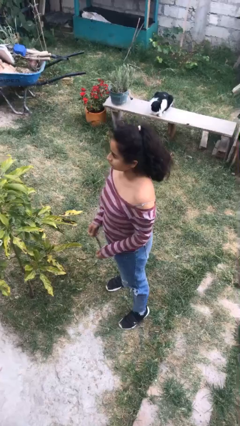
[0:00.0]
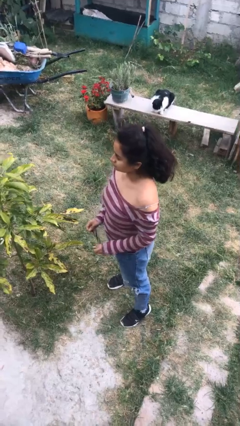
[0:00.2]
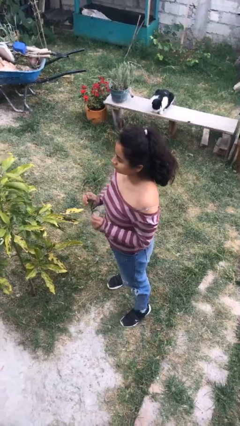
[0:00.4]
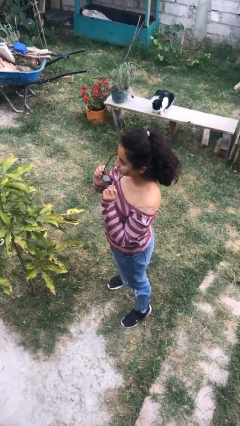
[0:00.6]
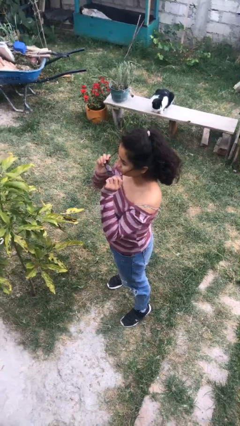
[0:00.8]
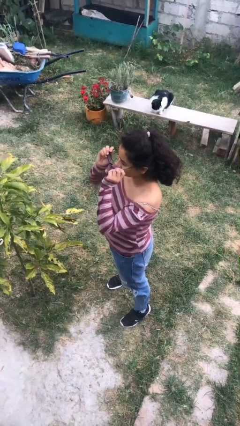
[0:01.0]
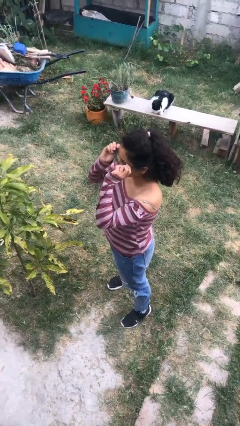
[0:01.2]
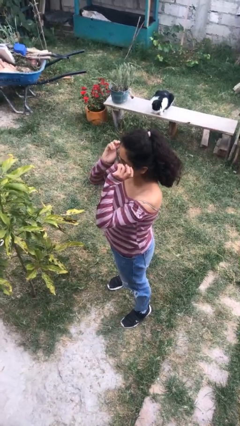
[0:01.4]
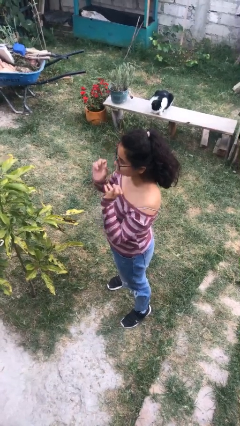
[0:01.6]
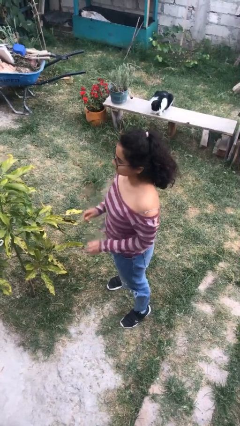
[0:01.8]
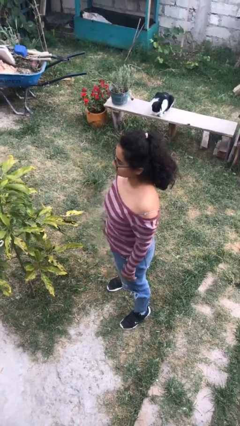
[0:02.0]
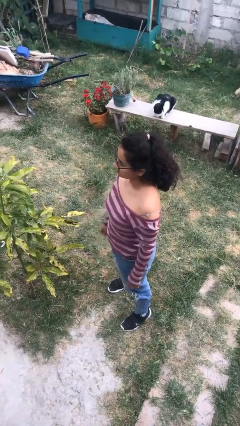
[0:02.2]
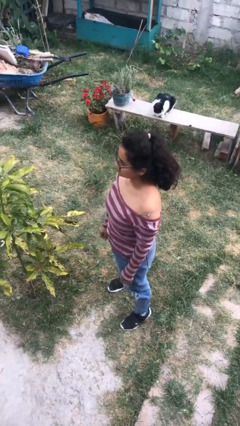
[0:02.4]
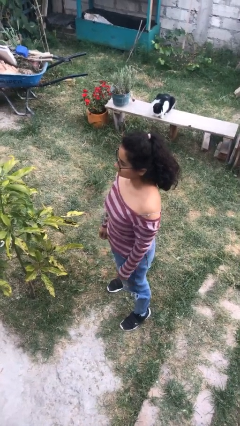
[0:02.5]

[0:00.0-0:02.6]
person puts on glasses

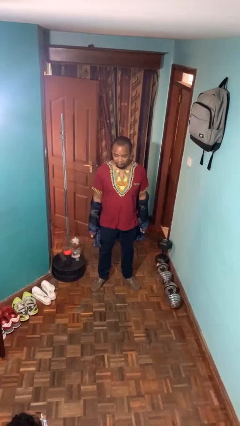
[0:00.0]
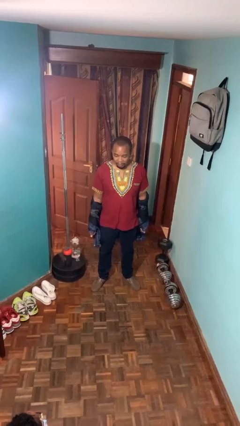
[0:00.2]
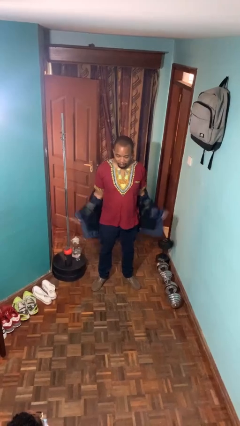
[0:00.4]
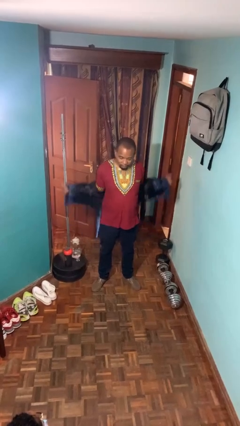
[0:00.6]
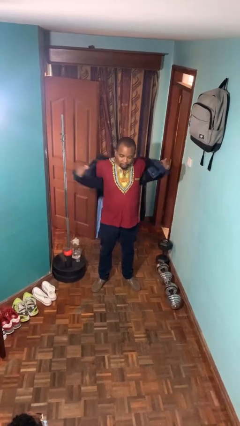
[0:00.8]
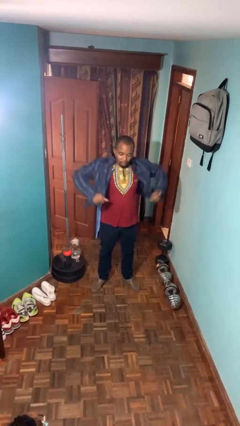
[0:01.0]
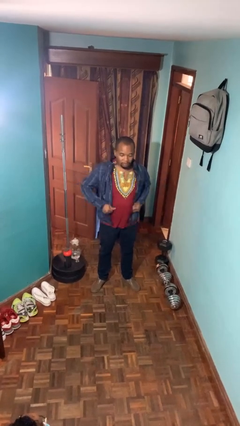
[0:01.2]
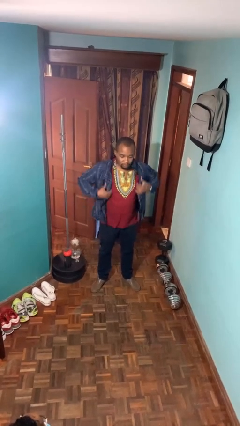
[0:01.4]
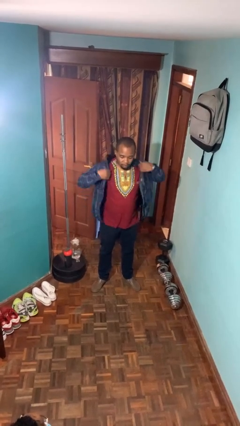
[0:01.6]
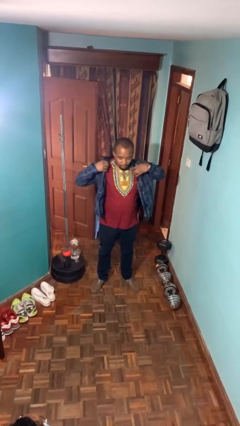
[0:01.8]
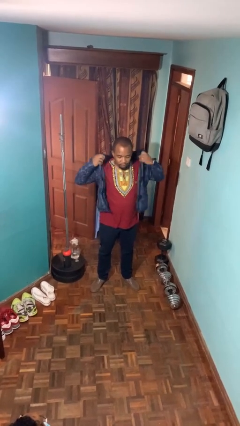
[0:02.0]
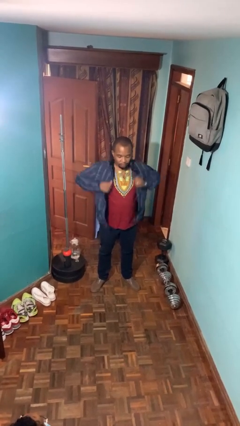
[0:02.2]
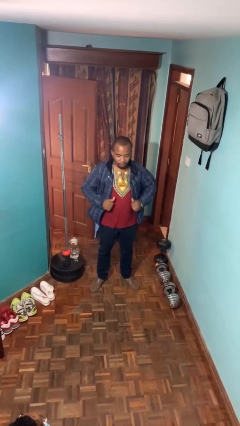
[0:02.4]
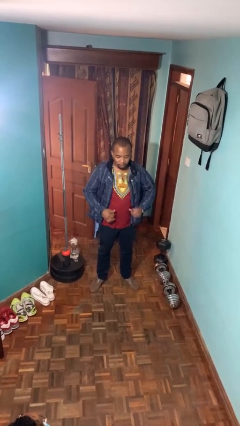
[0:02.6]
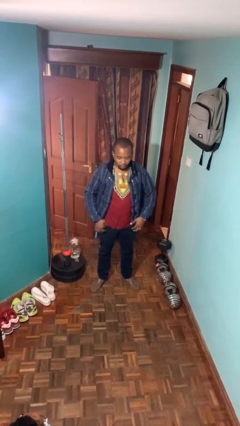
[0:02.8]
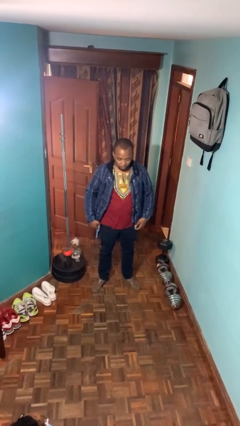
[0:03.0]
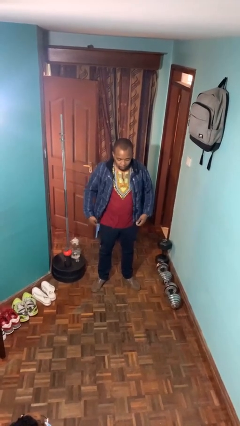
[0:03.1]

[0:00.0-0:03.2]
person puts on jacket

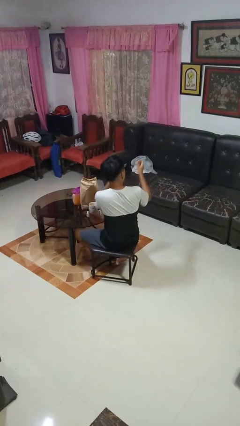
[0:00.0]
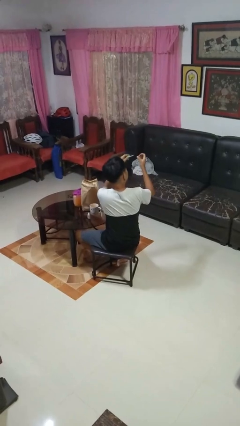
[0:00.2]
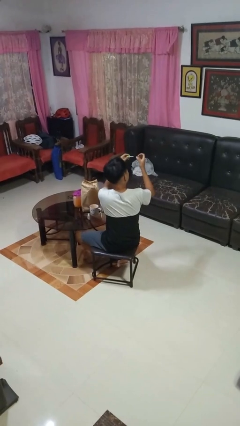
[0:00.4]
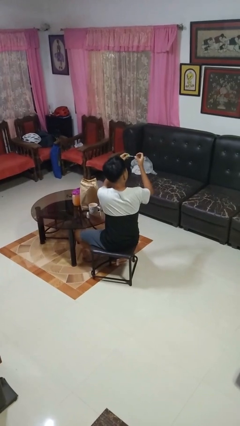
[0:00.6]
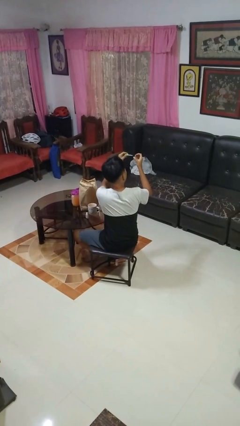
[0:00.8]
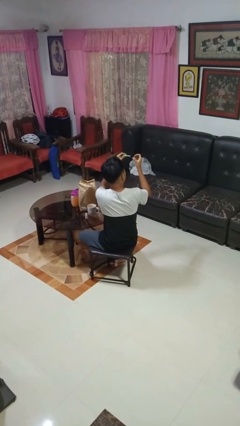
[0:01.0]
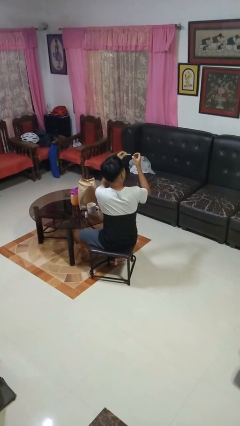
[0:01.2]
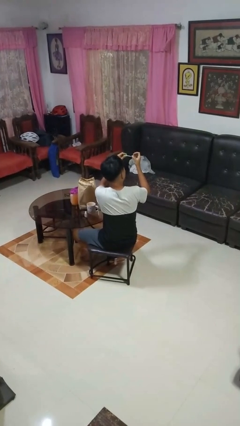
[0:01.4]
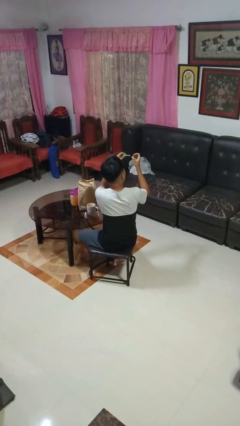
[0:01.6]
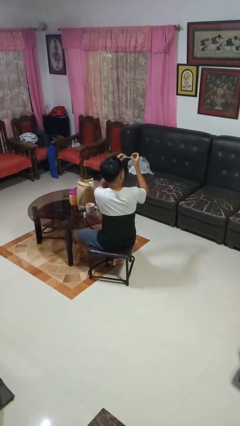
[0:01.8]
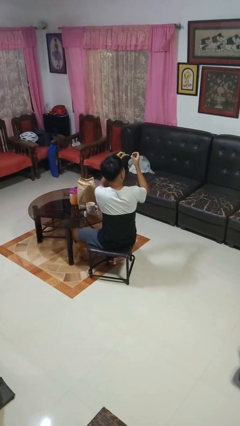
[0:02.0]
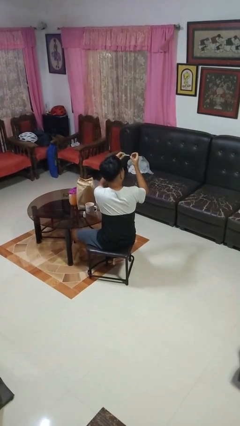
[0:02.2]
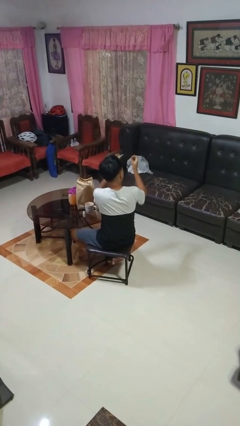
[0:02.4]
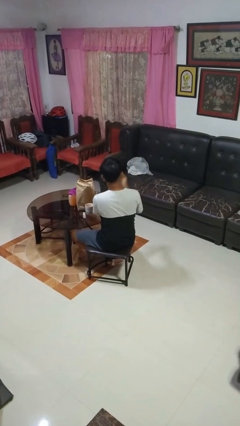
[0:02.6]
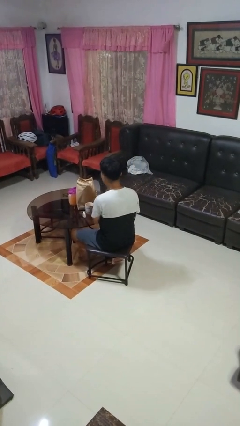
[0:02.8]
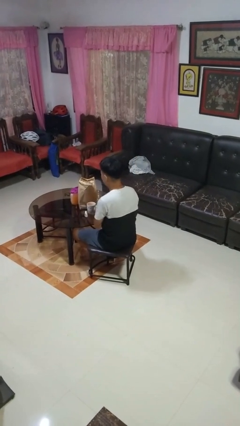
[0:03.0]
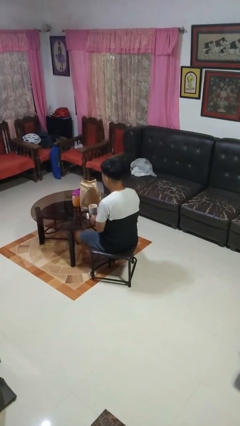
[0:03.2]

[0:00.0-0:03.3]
person paints fingernails

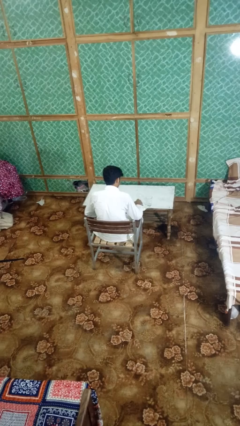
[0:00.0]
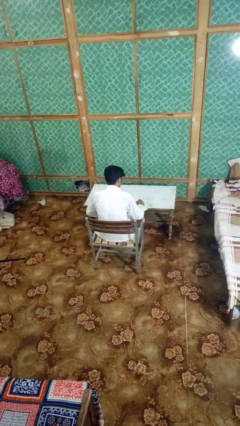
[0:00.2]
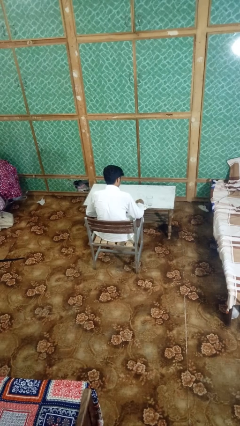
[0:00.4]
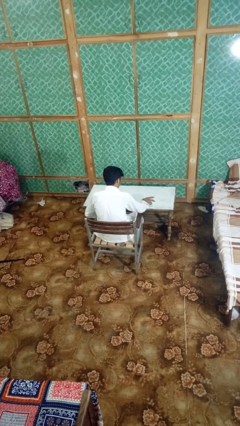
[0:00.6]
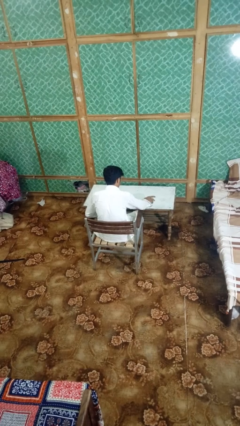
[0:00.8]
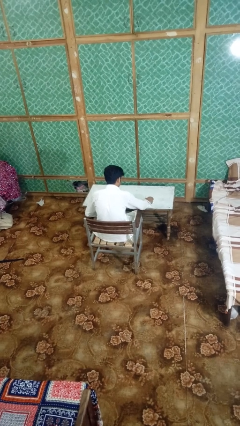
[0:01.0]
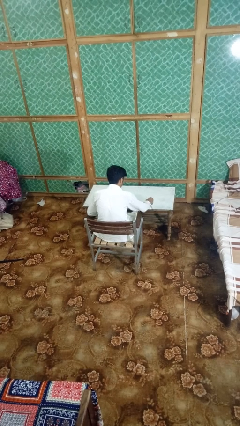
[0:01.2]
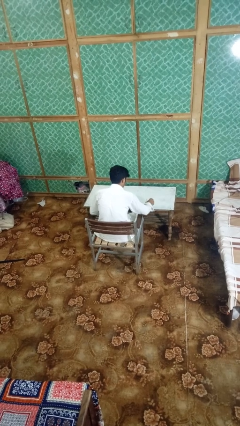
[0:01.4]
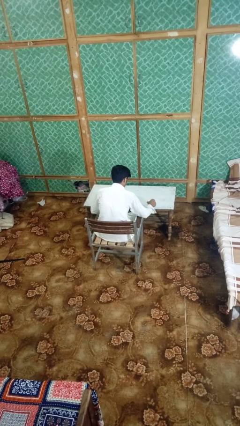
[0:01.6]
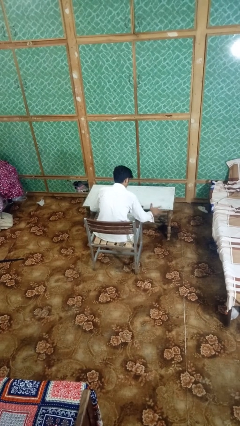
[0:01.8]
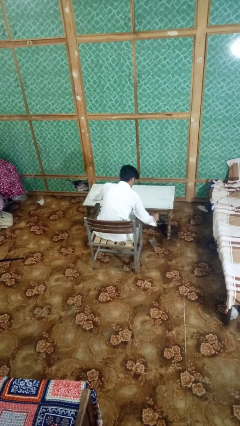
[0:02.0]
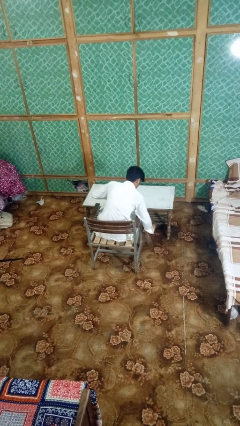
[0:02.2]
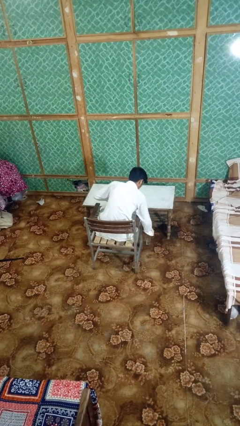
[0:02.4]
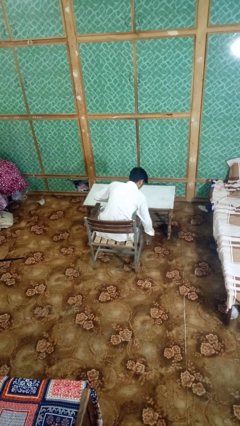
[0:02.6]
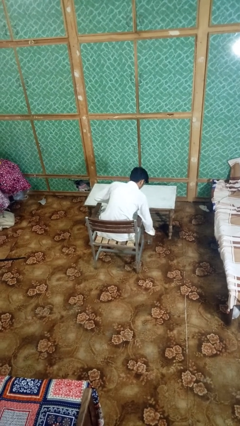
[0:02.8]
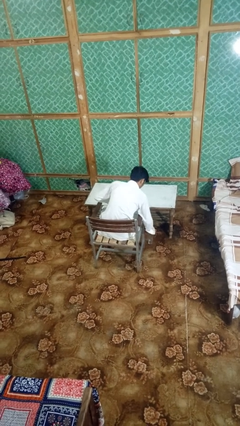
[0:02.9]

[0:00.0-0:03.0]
person knocks over glass

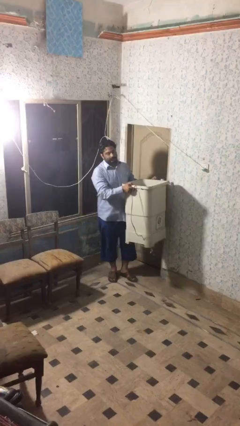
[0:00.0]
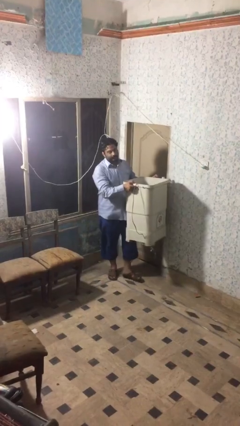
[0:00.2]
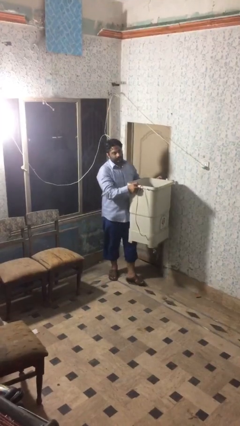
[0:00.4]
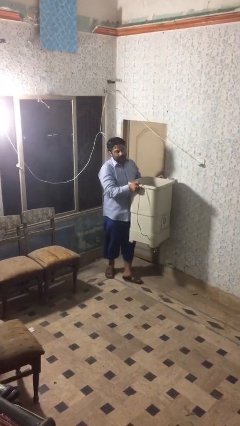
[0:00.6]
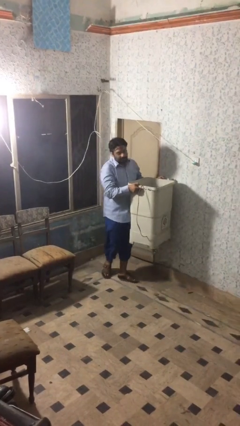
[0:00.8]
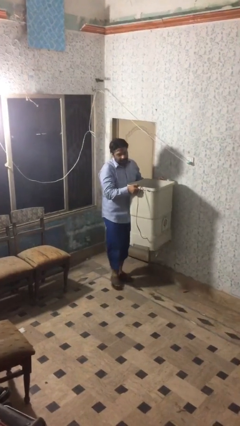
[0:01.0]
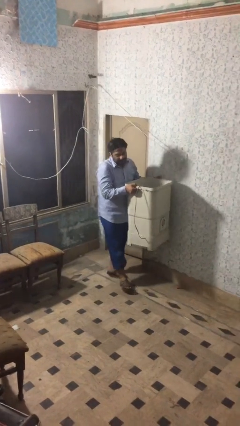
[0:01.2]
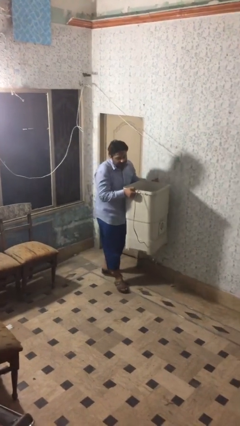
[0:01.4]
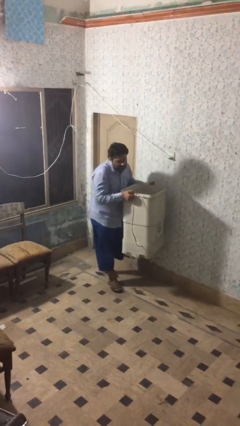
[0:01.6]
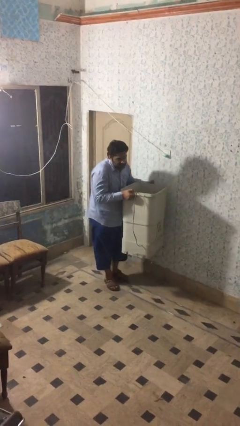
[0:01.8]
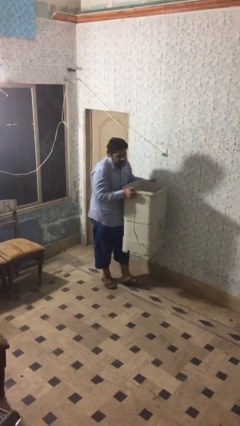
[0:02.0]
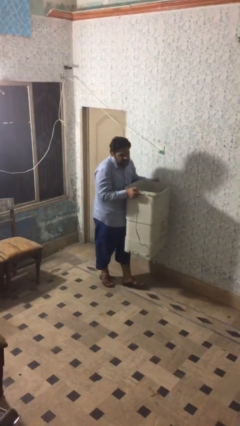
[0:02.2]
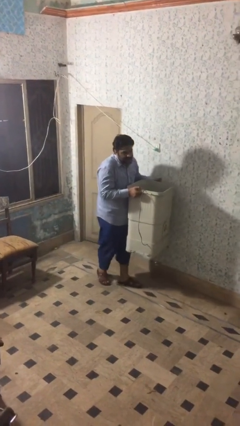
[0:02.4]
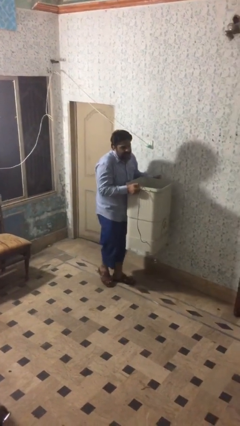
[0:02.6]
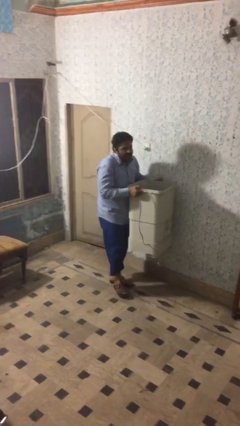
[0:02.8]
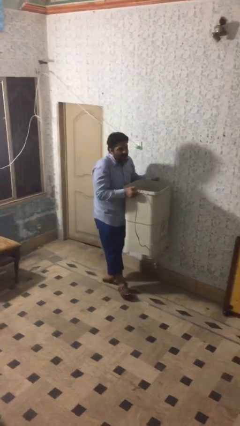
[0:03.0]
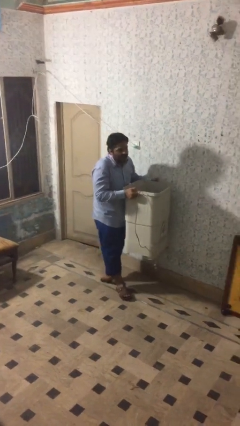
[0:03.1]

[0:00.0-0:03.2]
person carries heavy object

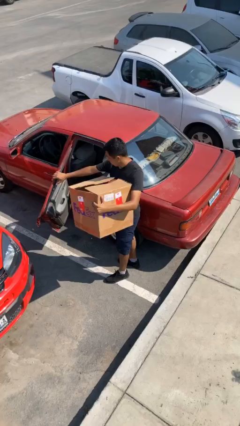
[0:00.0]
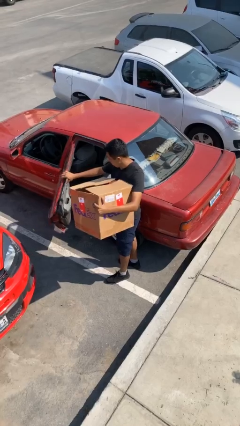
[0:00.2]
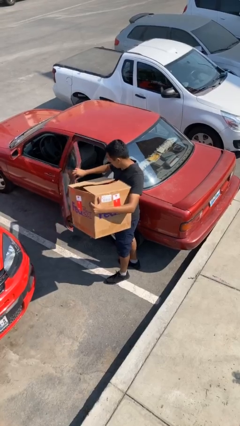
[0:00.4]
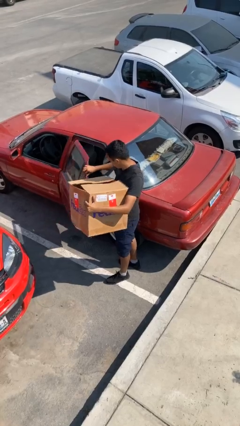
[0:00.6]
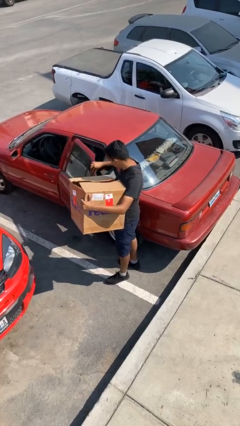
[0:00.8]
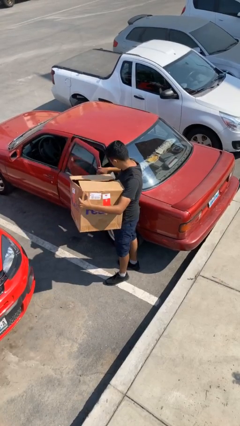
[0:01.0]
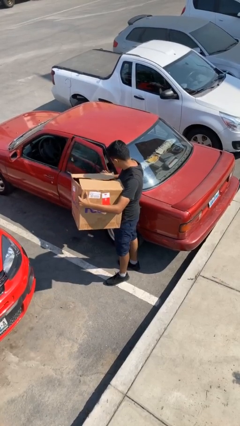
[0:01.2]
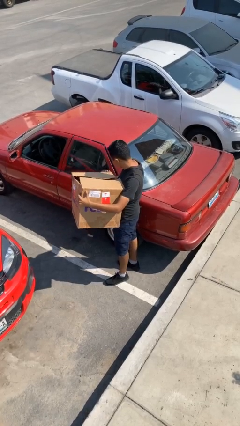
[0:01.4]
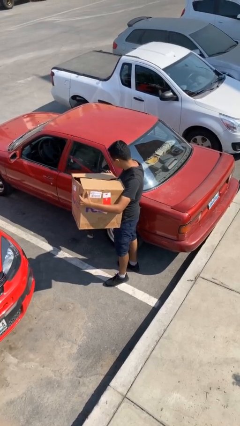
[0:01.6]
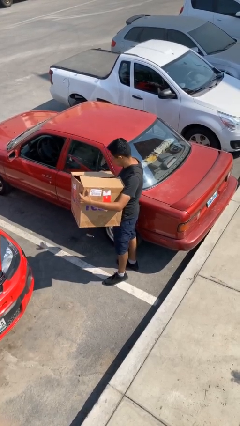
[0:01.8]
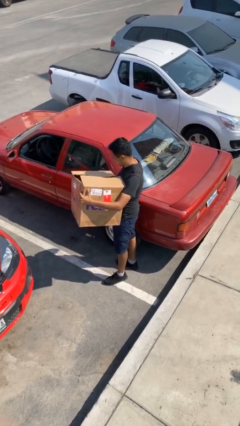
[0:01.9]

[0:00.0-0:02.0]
person closes car door

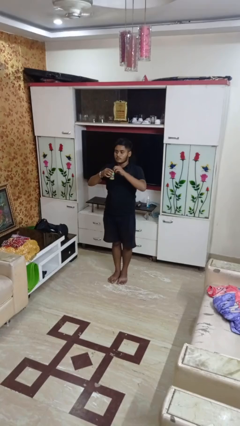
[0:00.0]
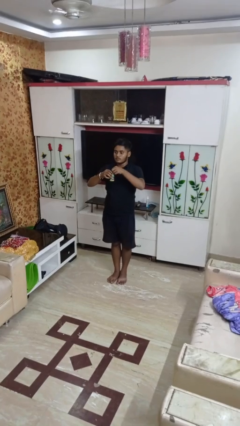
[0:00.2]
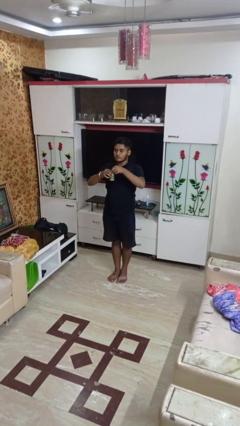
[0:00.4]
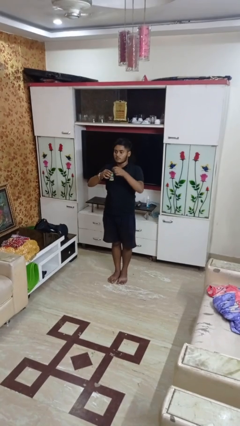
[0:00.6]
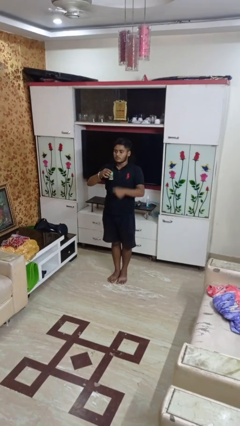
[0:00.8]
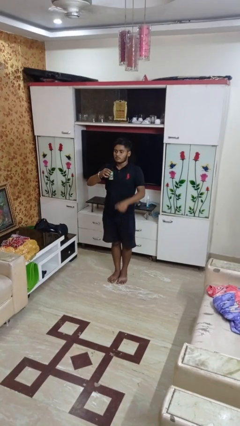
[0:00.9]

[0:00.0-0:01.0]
person opens beverage can
